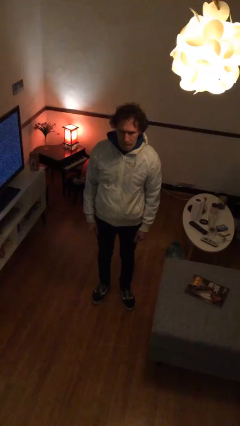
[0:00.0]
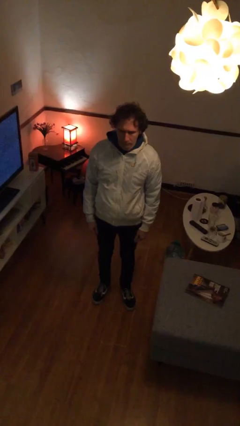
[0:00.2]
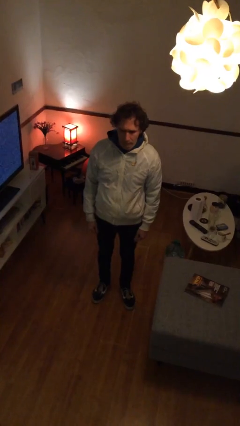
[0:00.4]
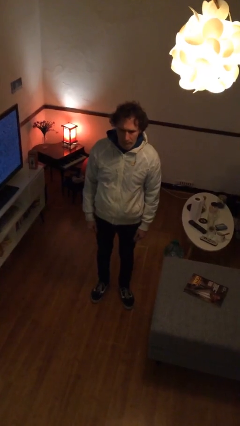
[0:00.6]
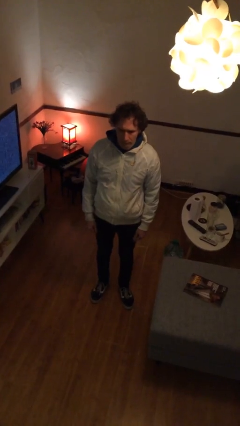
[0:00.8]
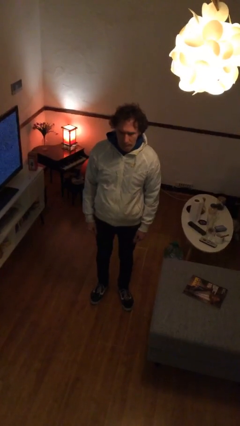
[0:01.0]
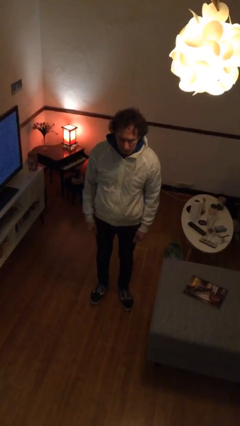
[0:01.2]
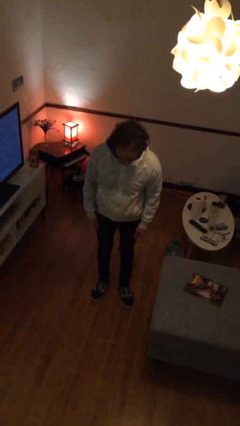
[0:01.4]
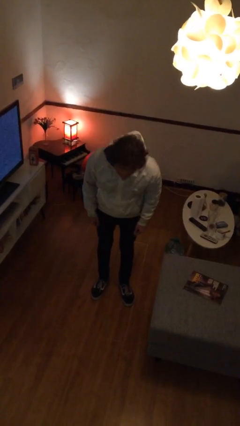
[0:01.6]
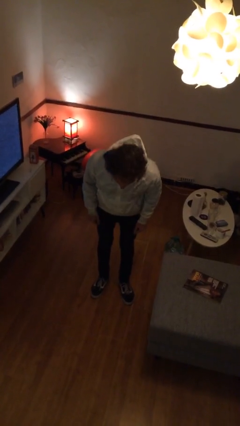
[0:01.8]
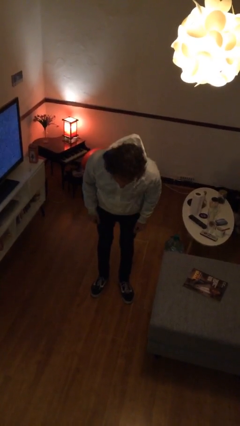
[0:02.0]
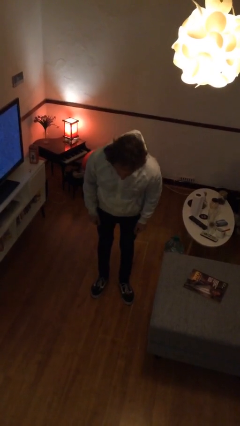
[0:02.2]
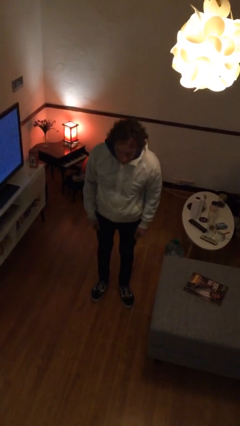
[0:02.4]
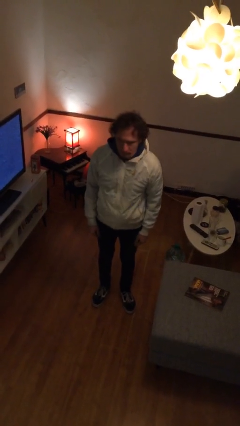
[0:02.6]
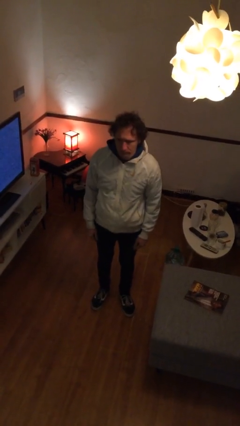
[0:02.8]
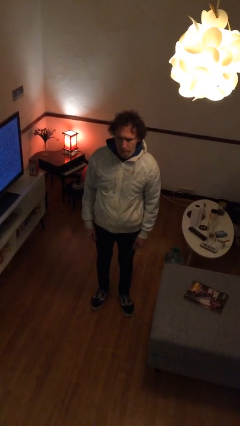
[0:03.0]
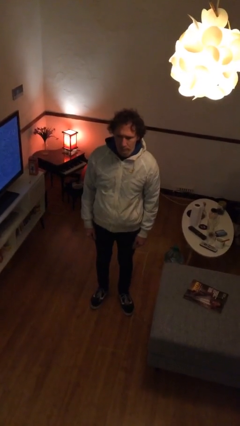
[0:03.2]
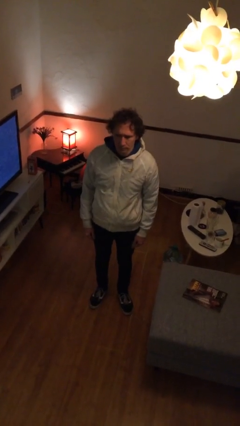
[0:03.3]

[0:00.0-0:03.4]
person bows

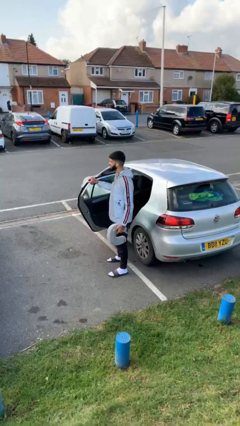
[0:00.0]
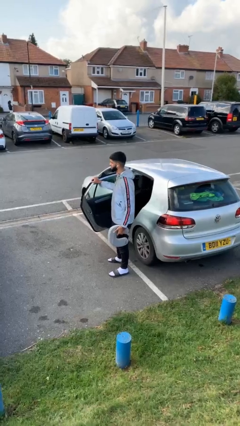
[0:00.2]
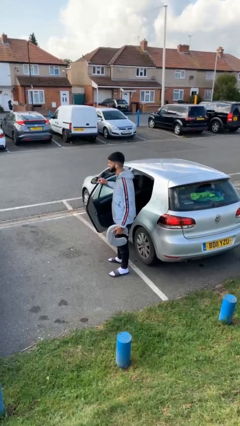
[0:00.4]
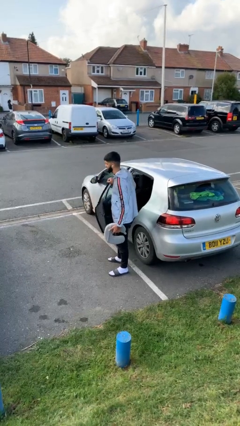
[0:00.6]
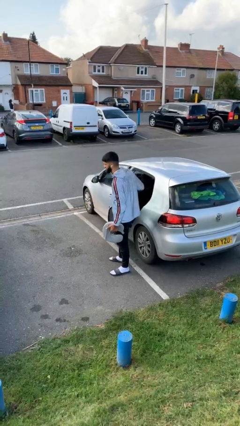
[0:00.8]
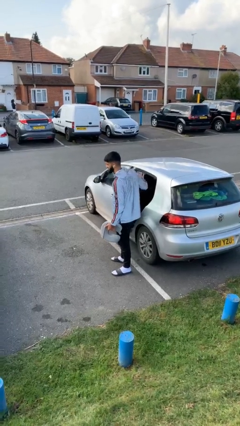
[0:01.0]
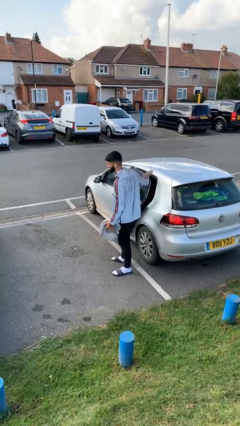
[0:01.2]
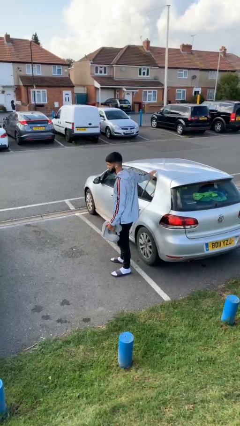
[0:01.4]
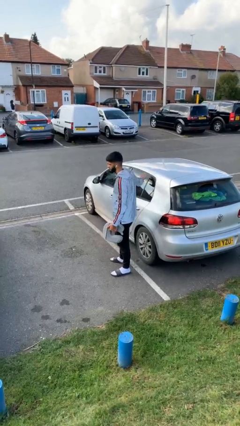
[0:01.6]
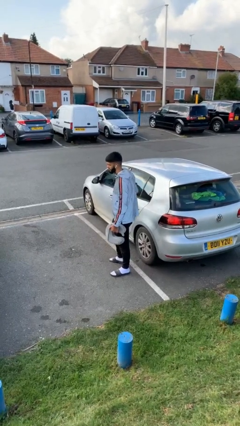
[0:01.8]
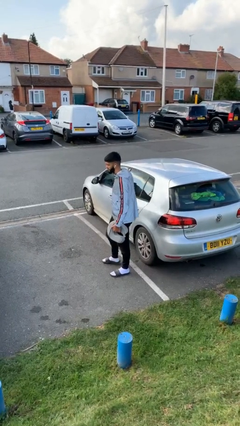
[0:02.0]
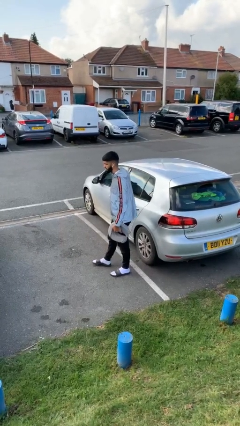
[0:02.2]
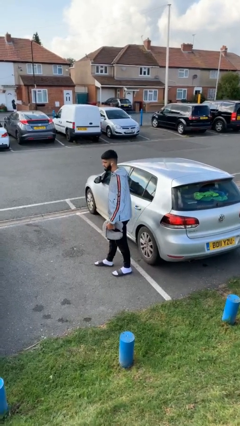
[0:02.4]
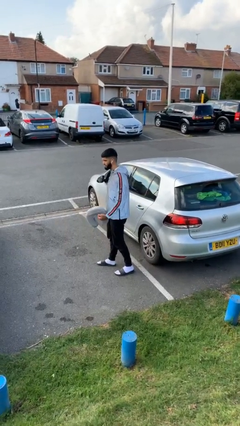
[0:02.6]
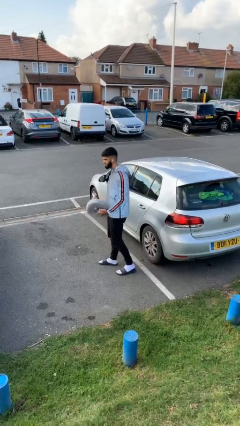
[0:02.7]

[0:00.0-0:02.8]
person closes car door

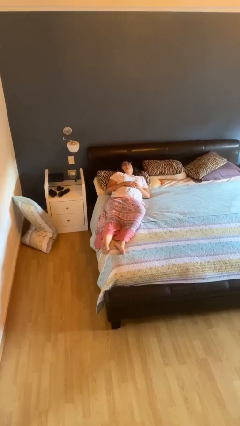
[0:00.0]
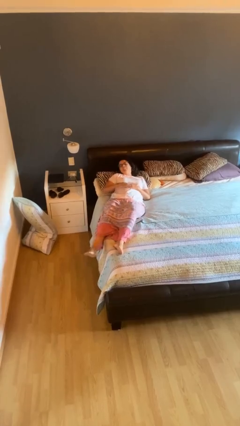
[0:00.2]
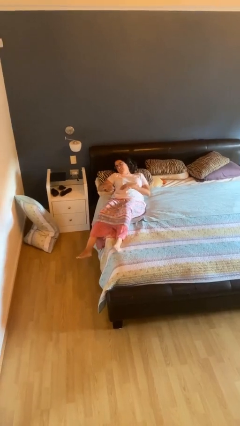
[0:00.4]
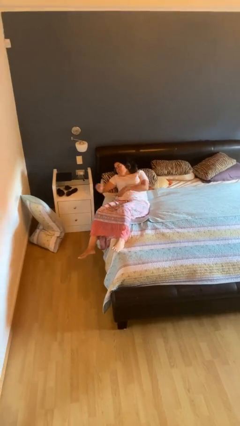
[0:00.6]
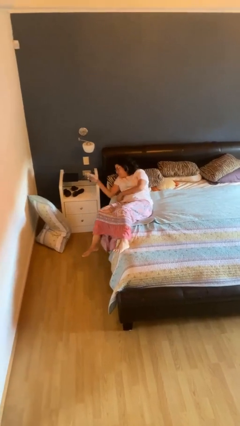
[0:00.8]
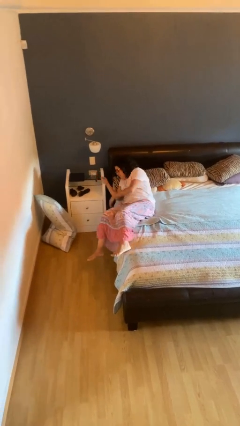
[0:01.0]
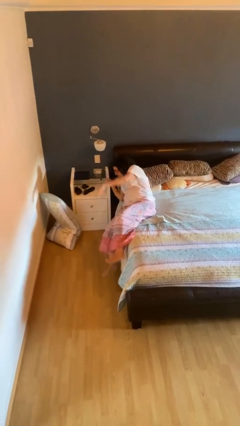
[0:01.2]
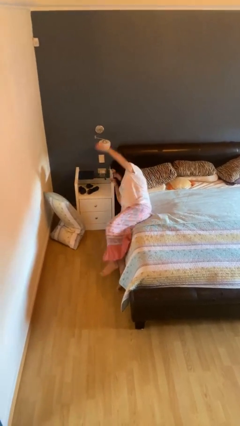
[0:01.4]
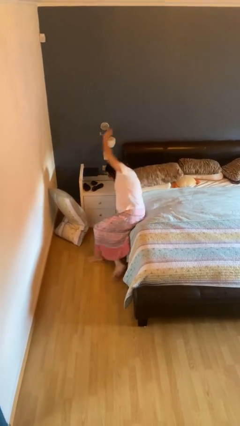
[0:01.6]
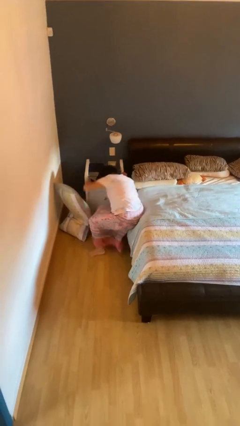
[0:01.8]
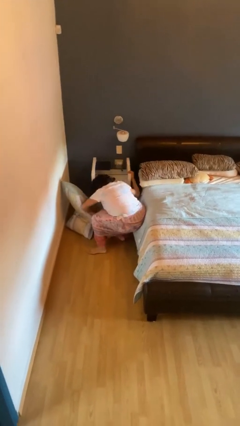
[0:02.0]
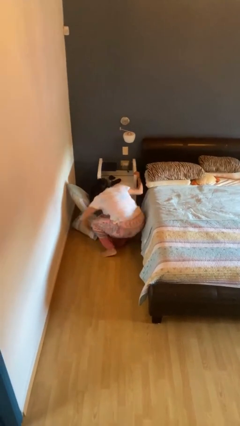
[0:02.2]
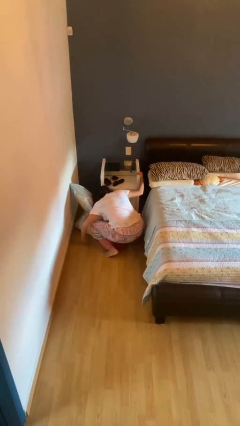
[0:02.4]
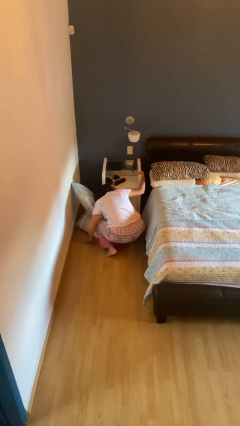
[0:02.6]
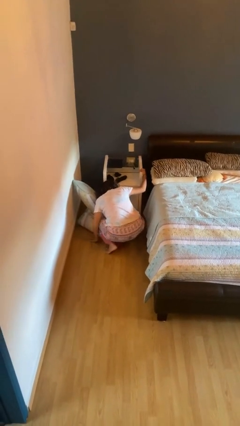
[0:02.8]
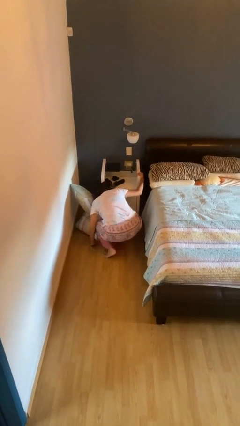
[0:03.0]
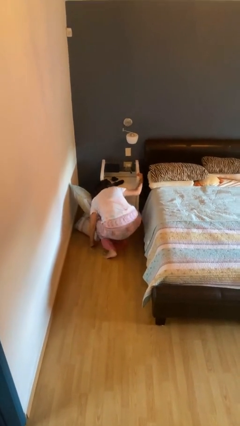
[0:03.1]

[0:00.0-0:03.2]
person falls from bed

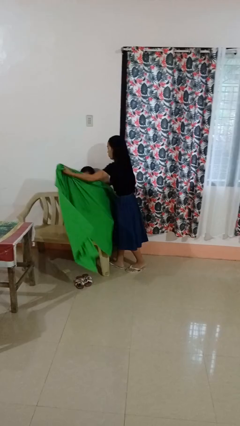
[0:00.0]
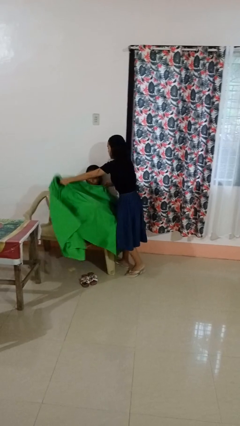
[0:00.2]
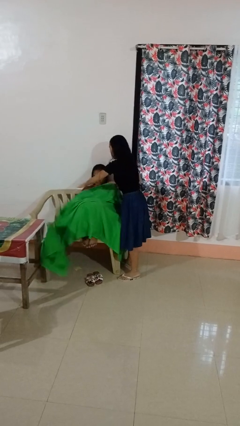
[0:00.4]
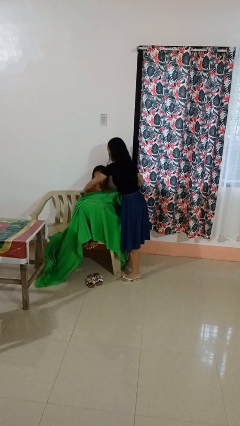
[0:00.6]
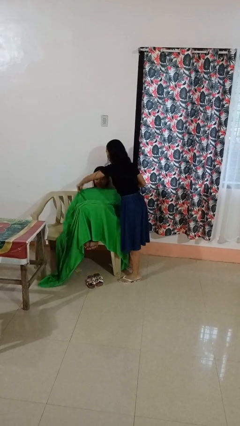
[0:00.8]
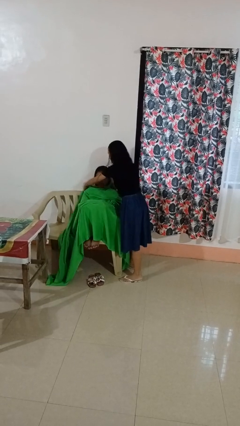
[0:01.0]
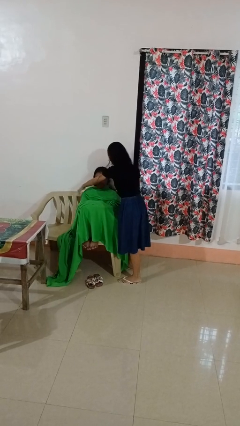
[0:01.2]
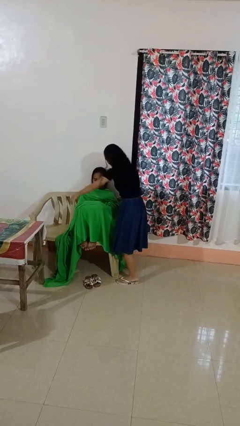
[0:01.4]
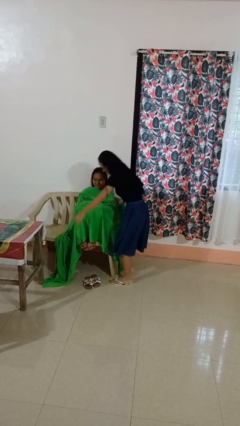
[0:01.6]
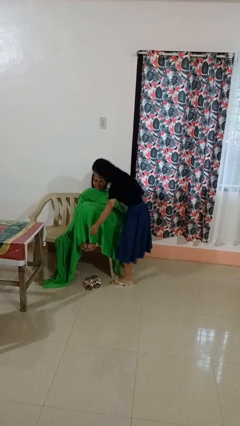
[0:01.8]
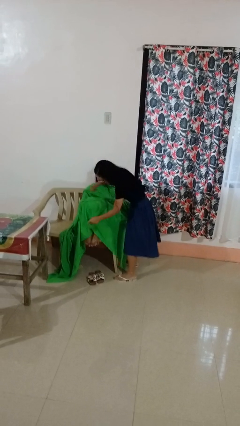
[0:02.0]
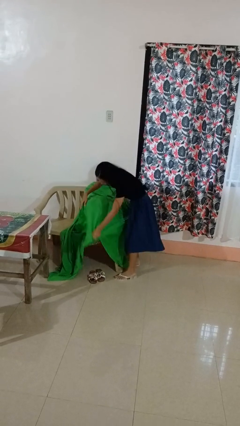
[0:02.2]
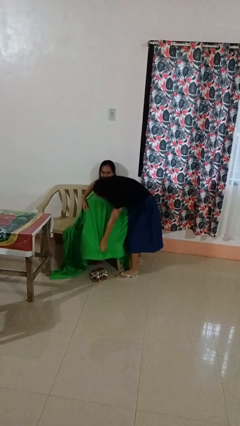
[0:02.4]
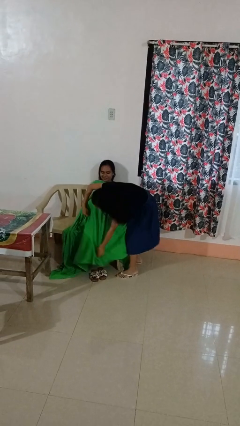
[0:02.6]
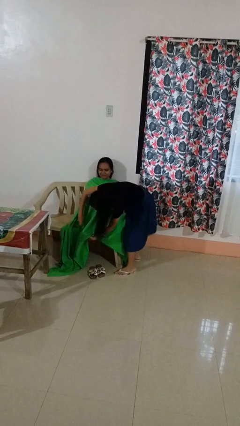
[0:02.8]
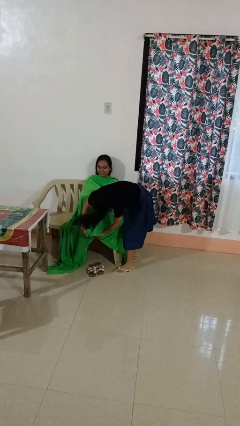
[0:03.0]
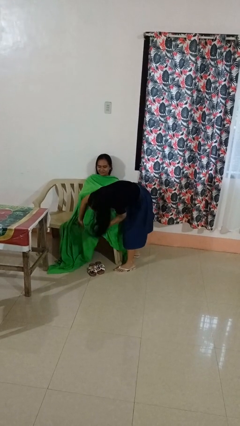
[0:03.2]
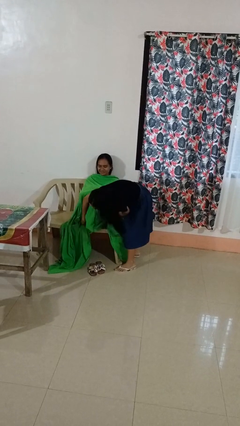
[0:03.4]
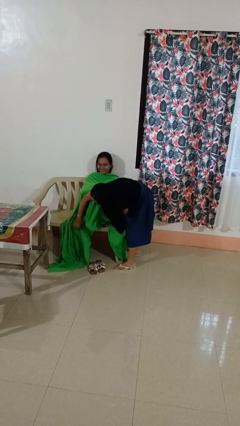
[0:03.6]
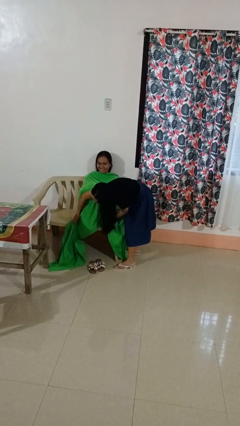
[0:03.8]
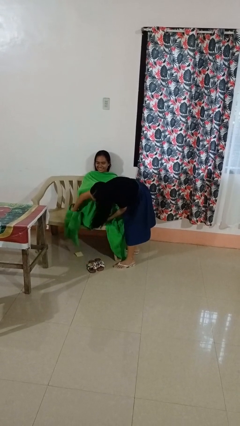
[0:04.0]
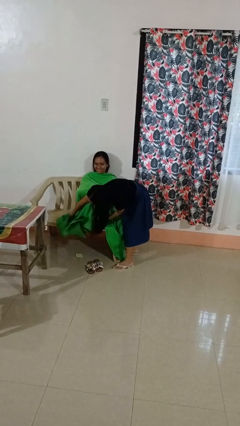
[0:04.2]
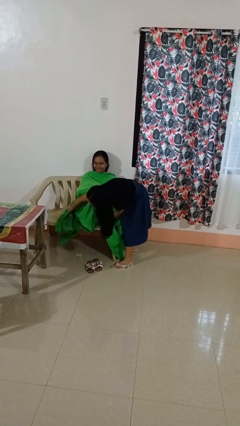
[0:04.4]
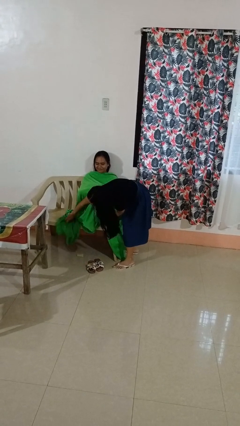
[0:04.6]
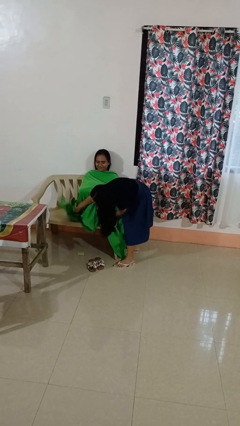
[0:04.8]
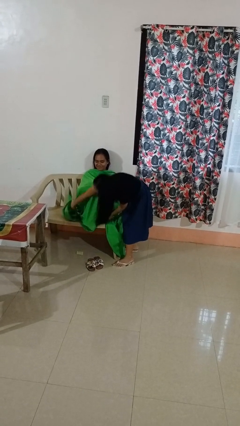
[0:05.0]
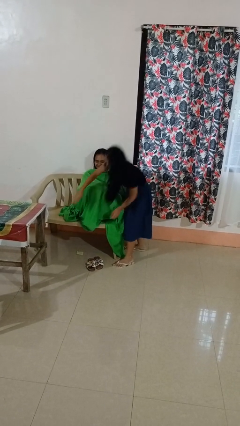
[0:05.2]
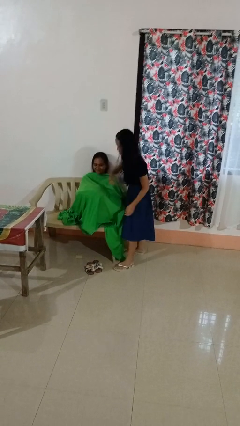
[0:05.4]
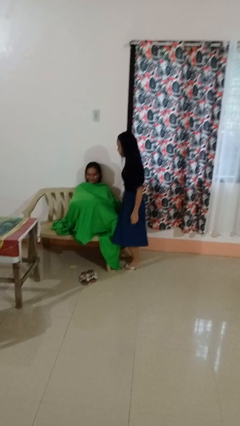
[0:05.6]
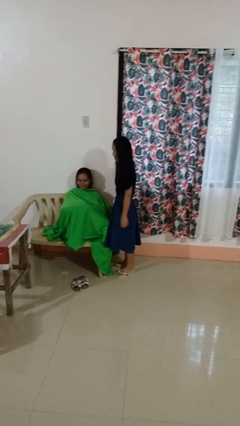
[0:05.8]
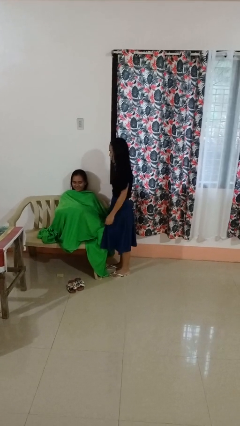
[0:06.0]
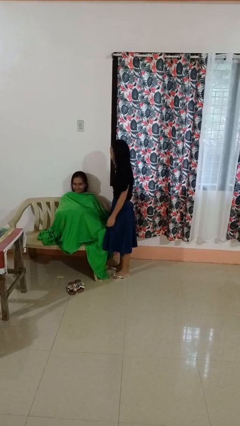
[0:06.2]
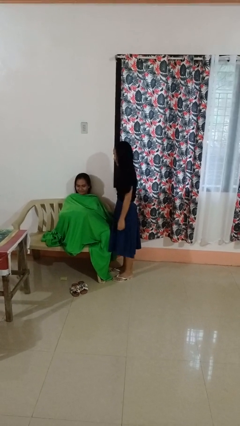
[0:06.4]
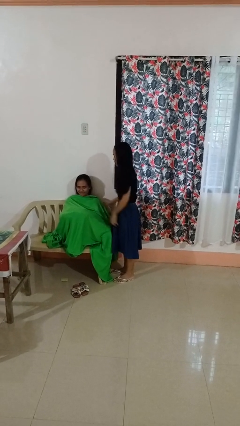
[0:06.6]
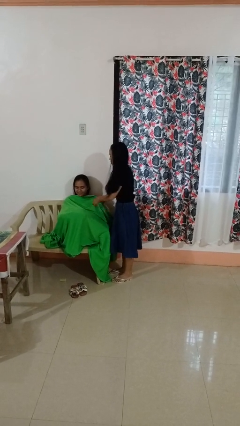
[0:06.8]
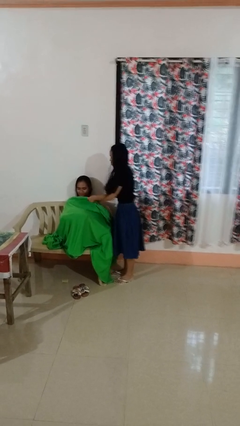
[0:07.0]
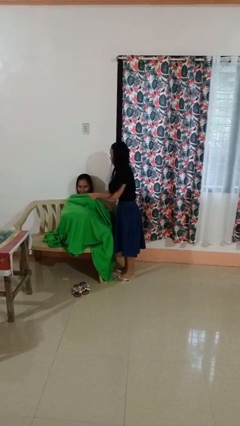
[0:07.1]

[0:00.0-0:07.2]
person covers friend with blanket

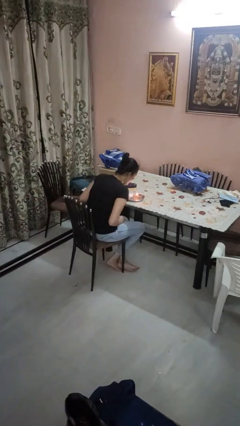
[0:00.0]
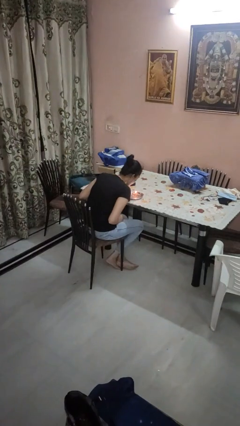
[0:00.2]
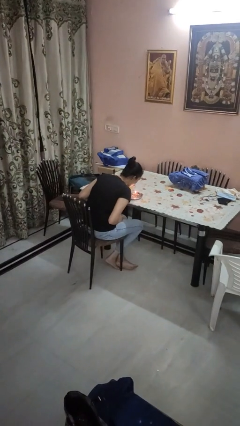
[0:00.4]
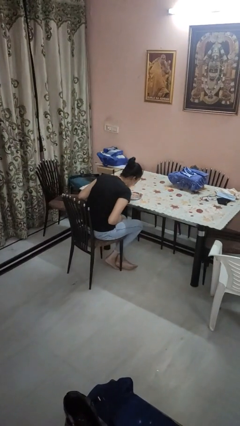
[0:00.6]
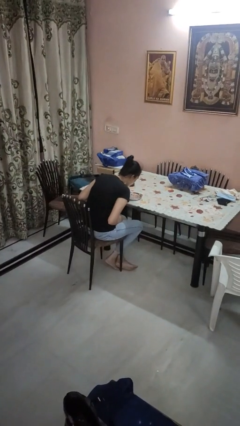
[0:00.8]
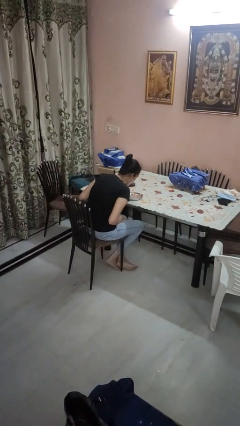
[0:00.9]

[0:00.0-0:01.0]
person extinguishes candle
